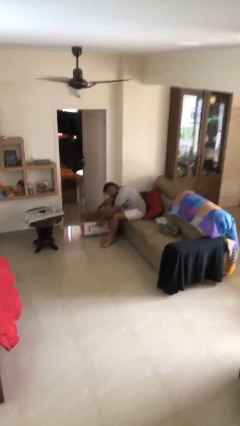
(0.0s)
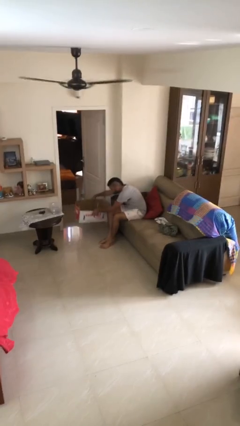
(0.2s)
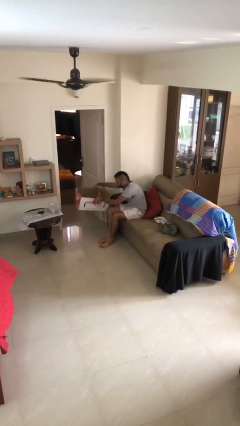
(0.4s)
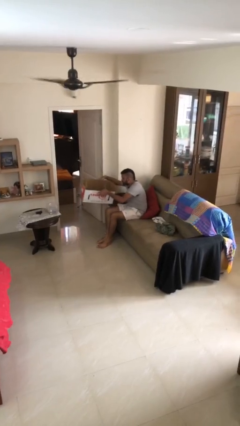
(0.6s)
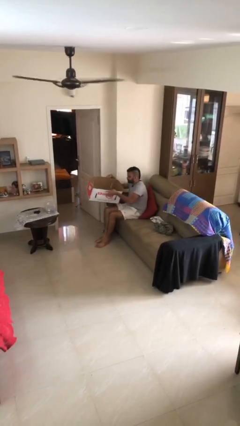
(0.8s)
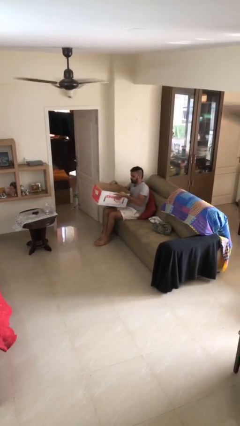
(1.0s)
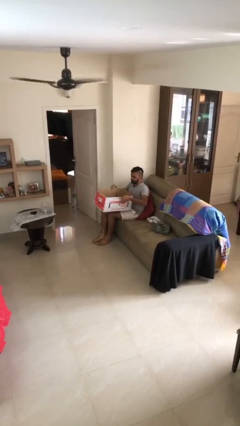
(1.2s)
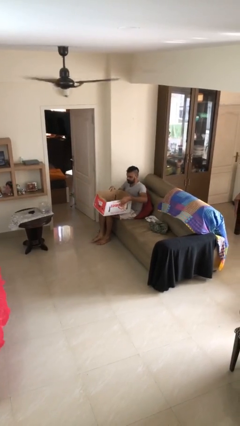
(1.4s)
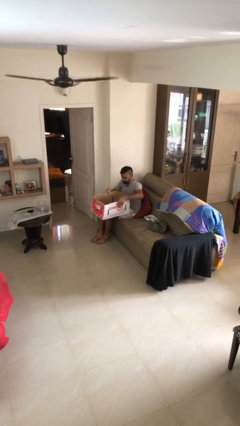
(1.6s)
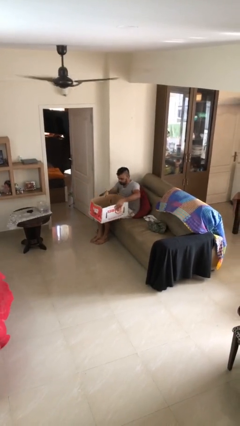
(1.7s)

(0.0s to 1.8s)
person picks up object from floor

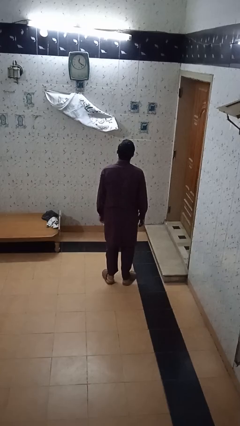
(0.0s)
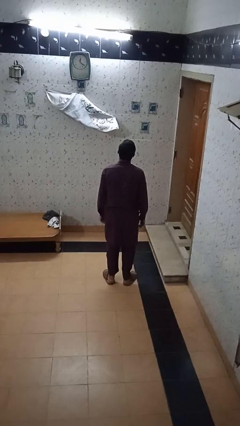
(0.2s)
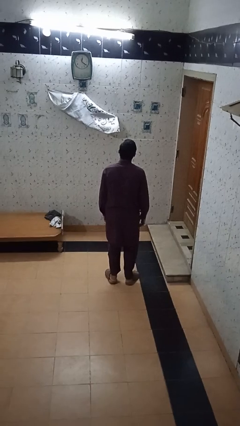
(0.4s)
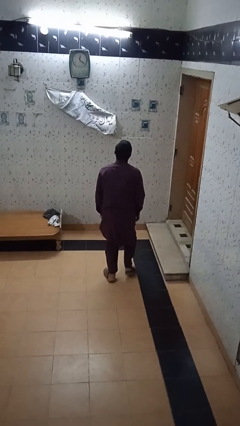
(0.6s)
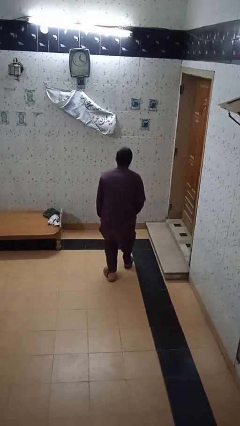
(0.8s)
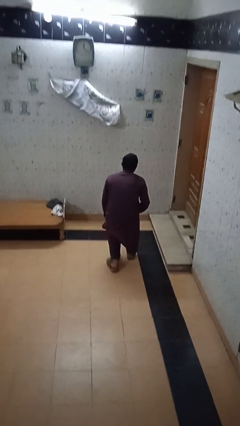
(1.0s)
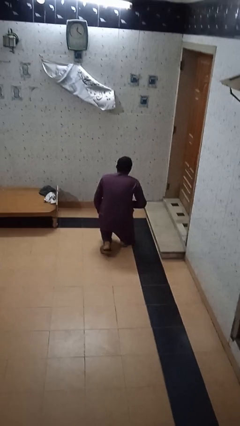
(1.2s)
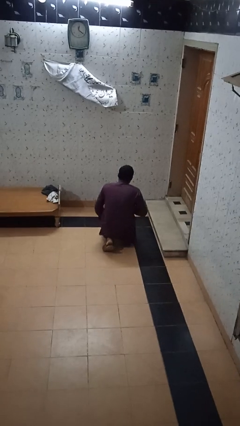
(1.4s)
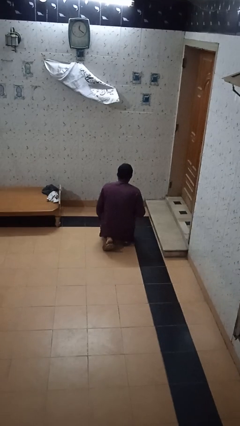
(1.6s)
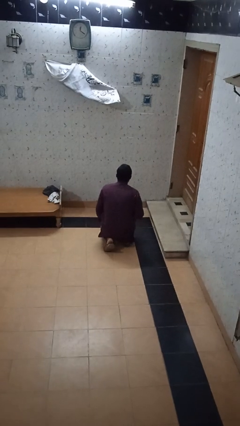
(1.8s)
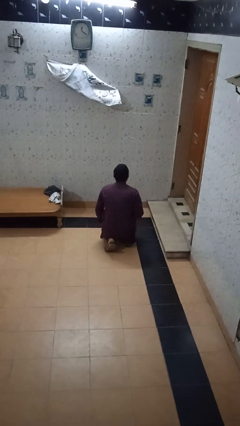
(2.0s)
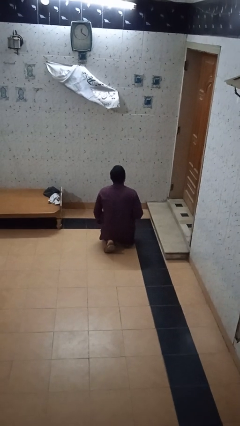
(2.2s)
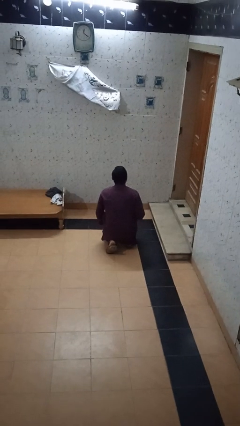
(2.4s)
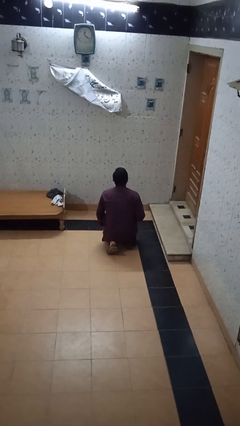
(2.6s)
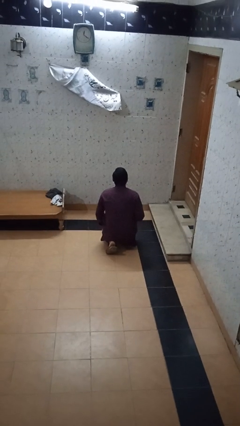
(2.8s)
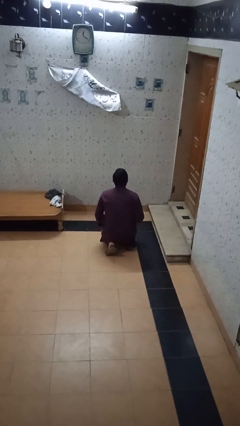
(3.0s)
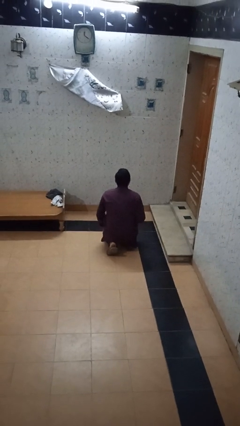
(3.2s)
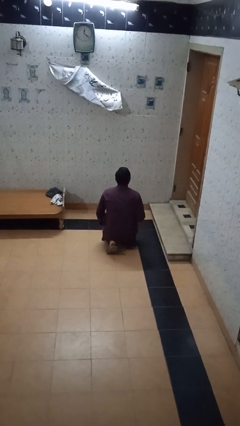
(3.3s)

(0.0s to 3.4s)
person kneels

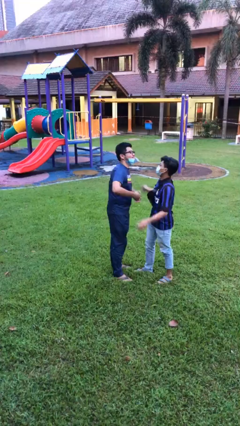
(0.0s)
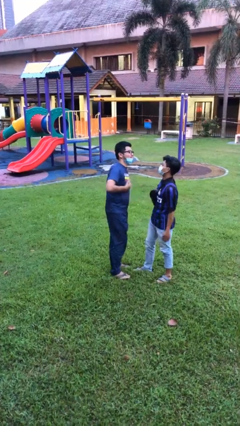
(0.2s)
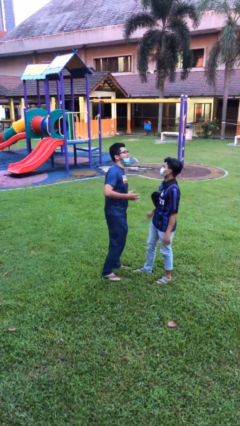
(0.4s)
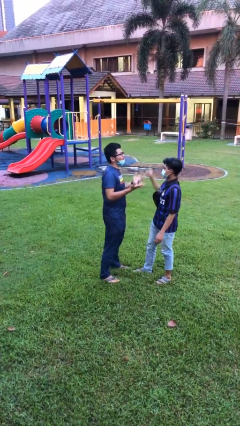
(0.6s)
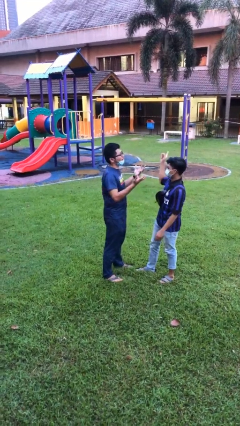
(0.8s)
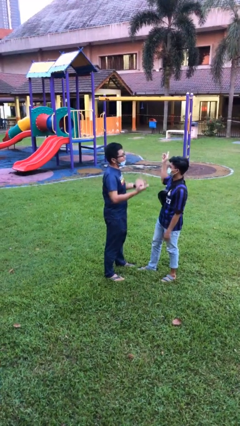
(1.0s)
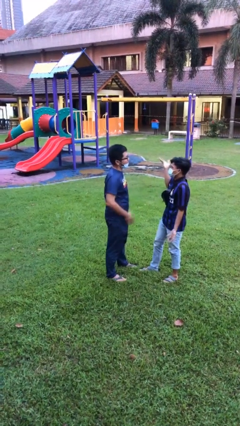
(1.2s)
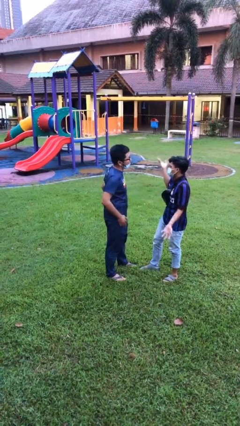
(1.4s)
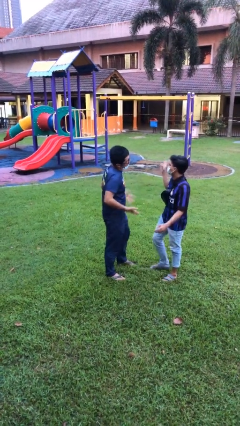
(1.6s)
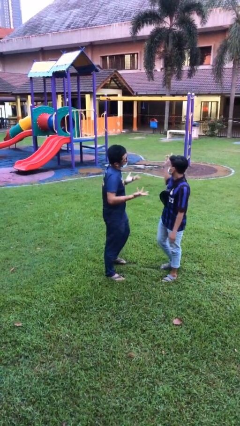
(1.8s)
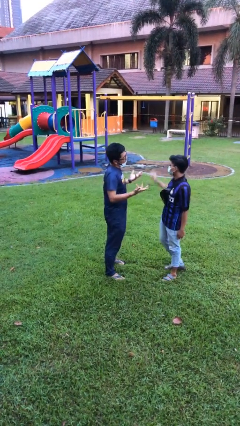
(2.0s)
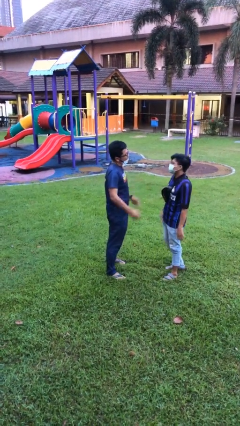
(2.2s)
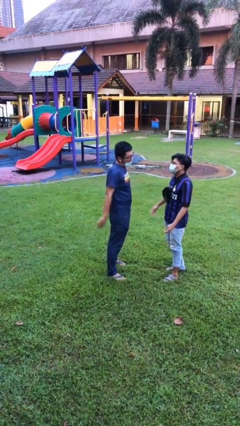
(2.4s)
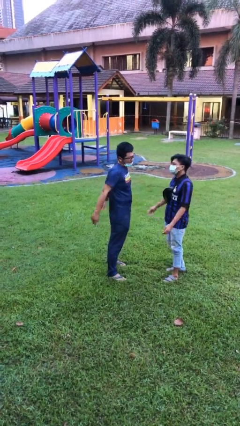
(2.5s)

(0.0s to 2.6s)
person talks to person

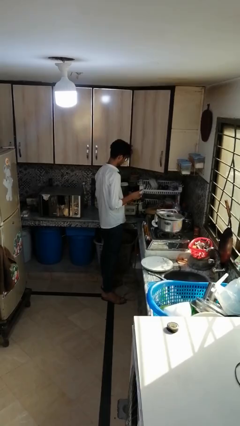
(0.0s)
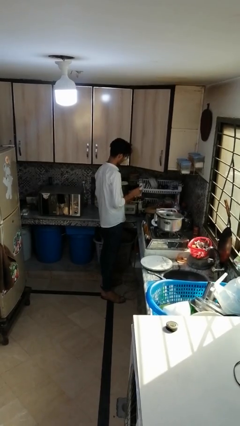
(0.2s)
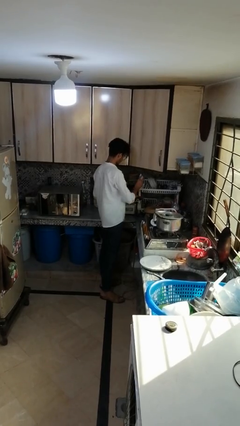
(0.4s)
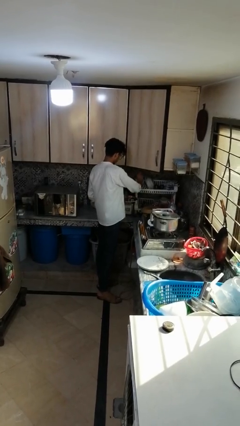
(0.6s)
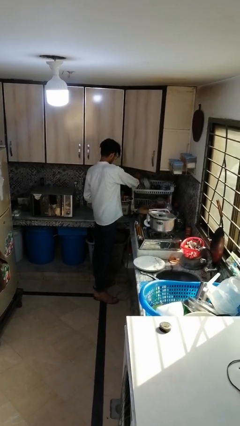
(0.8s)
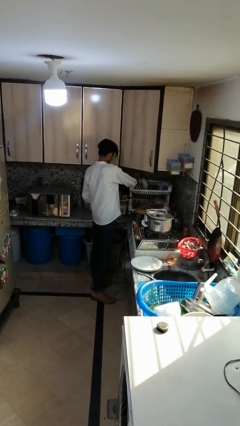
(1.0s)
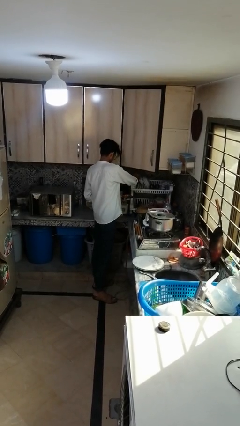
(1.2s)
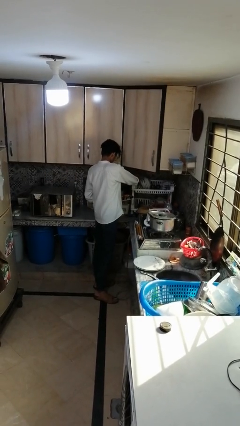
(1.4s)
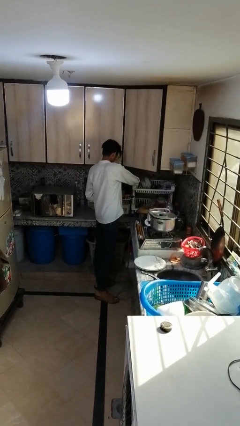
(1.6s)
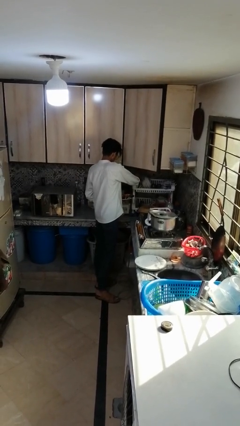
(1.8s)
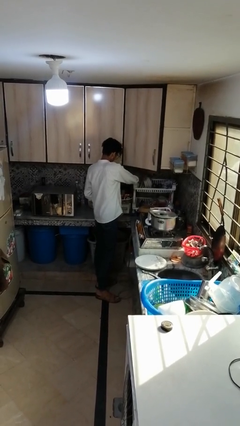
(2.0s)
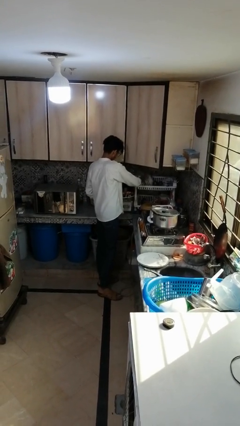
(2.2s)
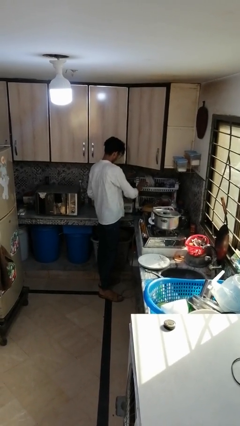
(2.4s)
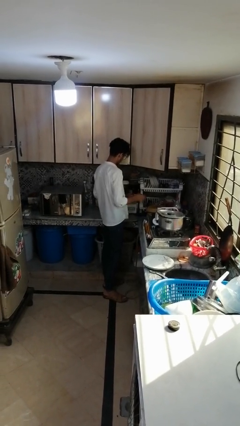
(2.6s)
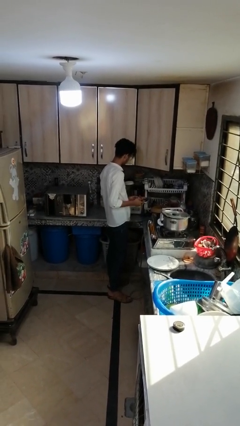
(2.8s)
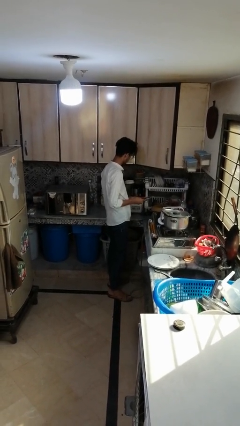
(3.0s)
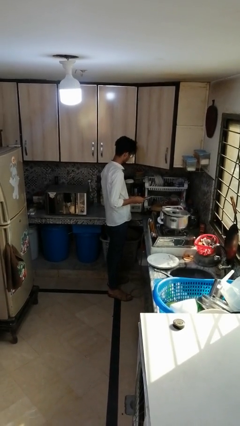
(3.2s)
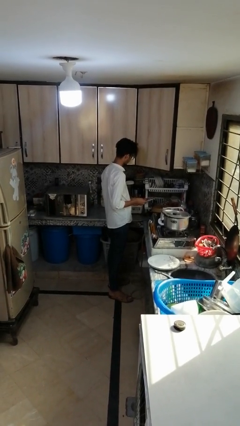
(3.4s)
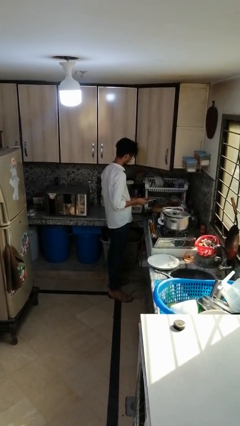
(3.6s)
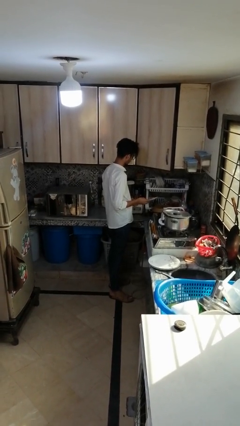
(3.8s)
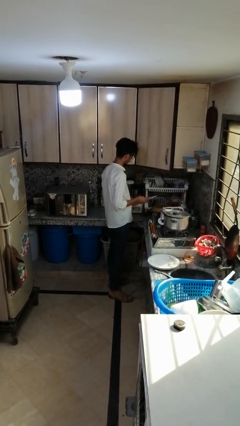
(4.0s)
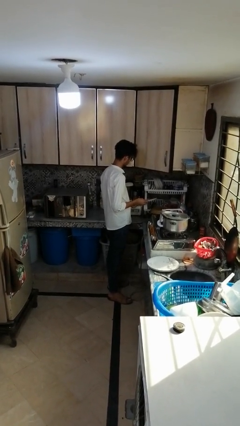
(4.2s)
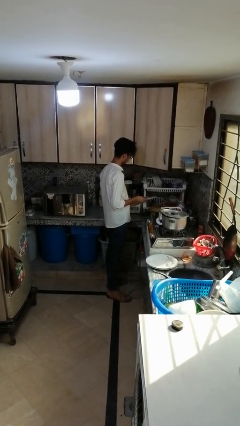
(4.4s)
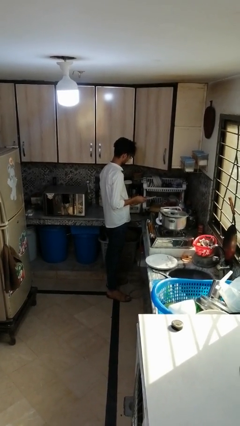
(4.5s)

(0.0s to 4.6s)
person loads dishwasher

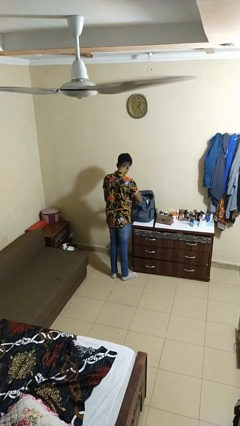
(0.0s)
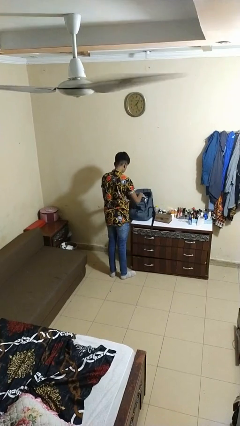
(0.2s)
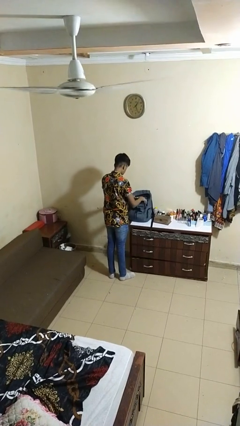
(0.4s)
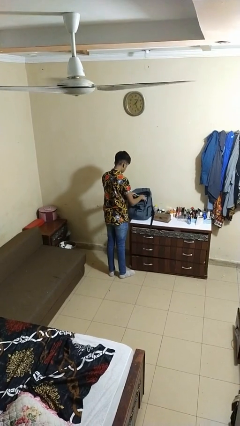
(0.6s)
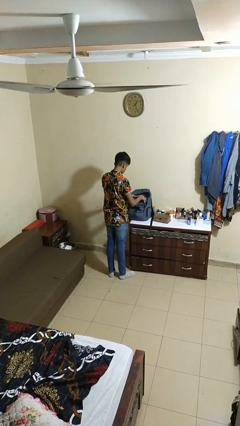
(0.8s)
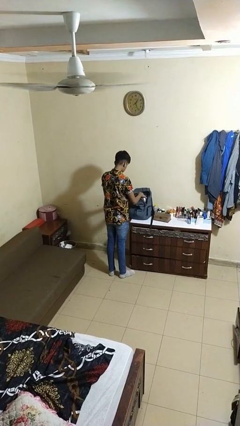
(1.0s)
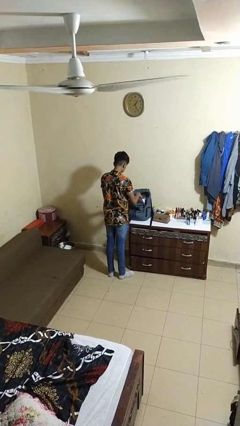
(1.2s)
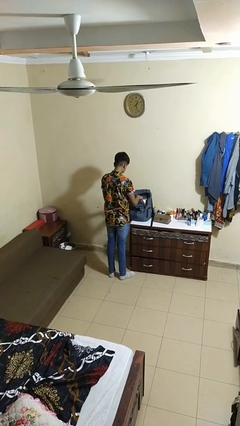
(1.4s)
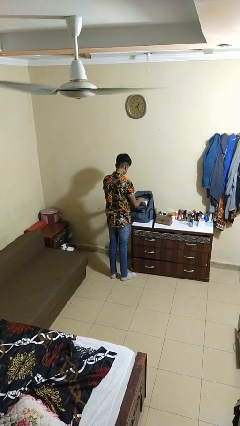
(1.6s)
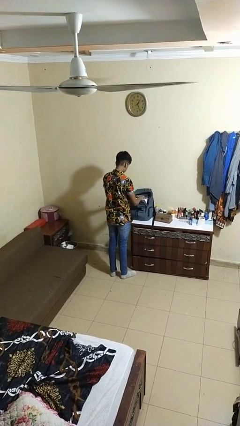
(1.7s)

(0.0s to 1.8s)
person searches in backpack

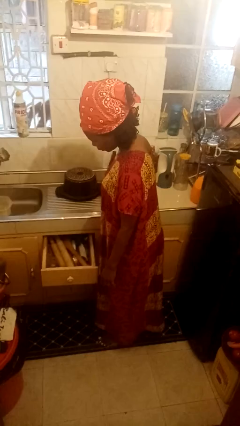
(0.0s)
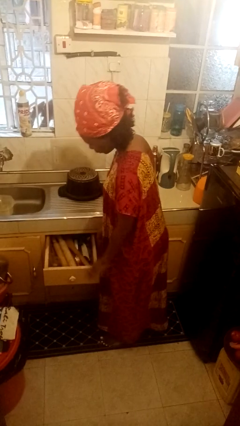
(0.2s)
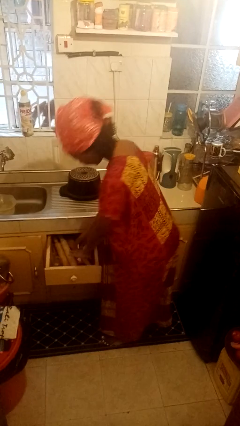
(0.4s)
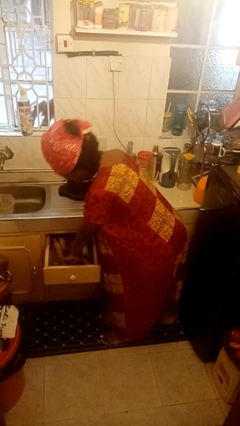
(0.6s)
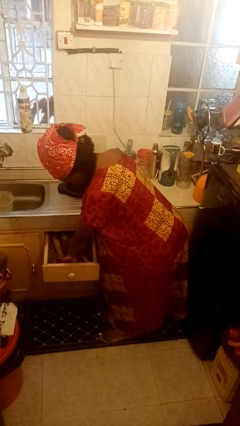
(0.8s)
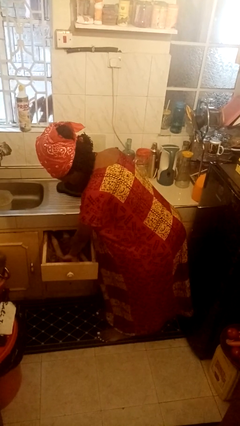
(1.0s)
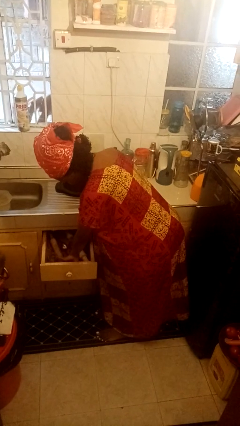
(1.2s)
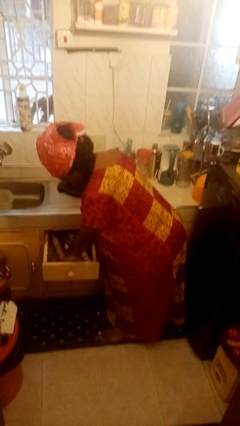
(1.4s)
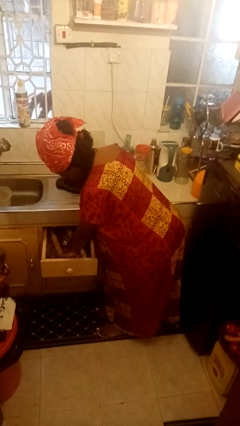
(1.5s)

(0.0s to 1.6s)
person searches in kitchen drawer

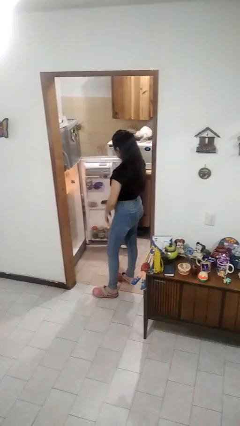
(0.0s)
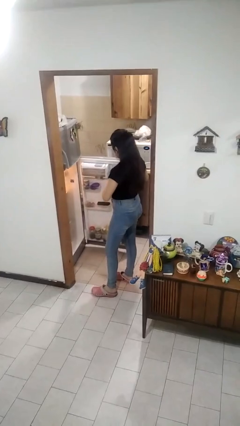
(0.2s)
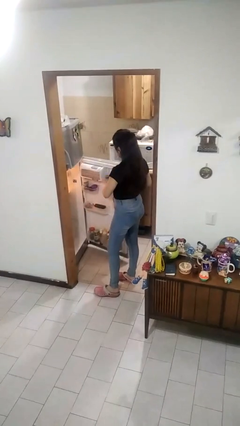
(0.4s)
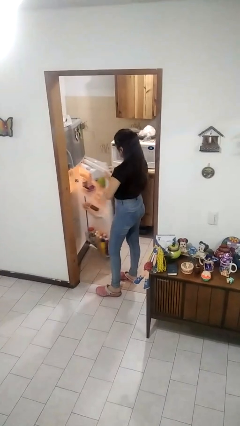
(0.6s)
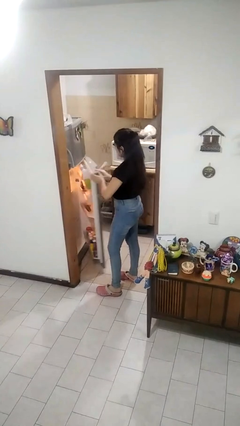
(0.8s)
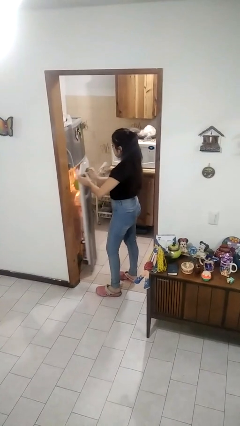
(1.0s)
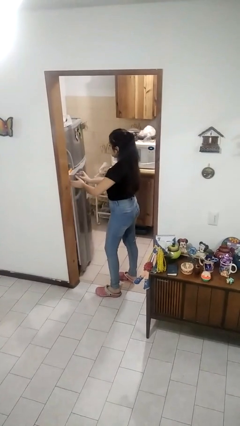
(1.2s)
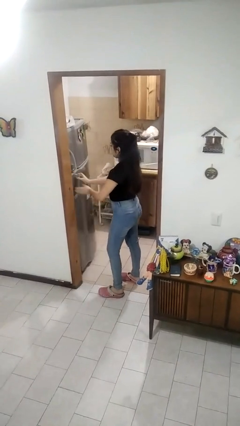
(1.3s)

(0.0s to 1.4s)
person closes refrigerator
